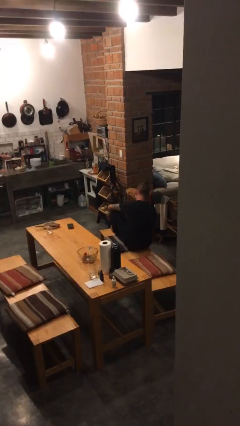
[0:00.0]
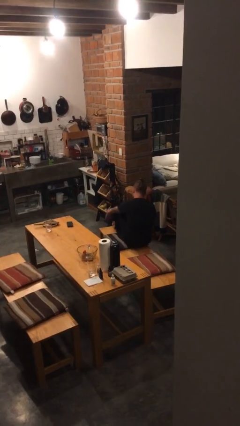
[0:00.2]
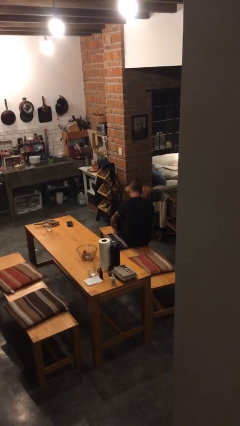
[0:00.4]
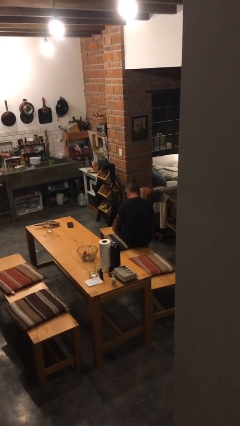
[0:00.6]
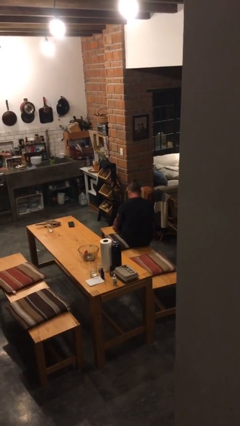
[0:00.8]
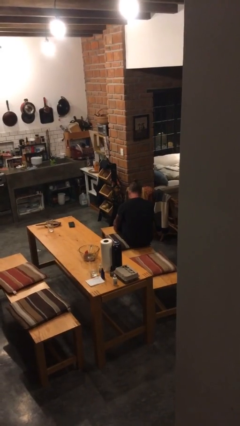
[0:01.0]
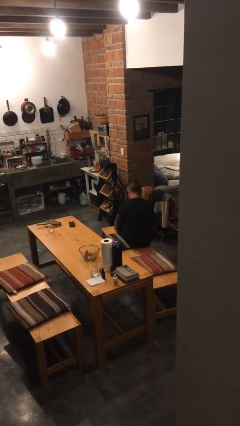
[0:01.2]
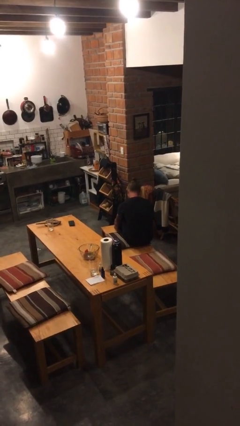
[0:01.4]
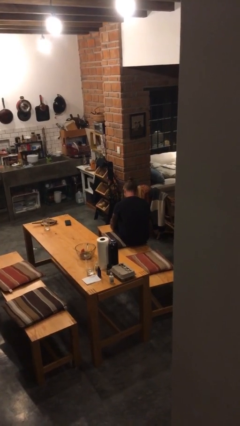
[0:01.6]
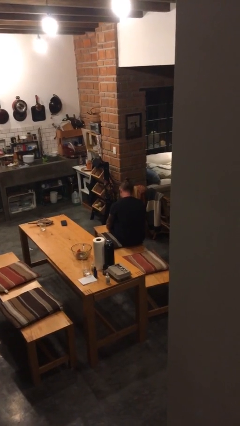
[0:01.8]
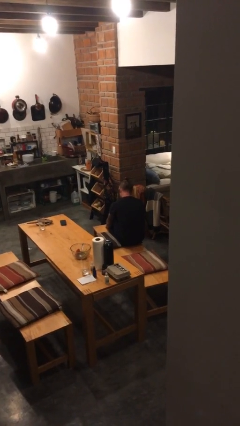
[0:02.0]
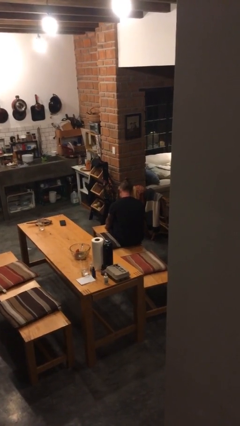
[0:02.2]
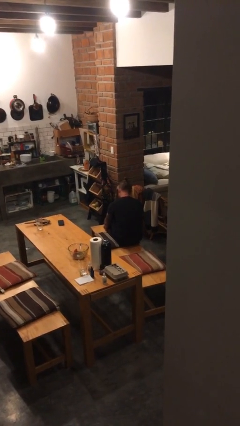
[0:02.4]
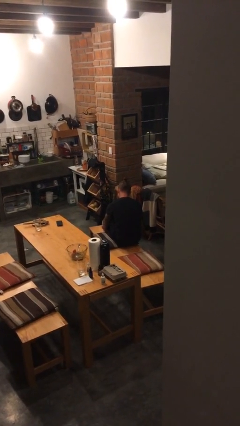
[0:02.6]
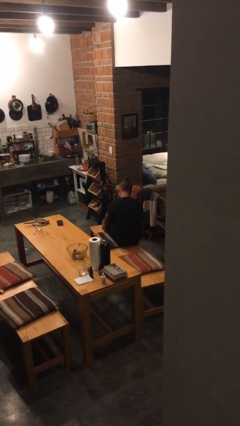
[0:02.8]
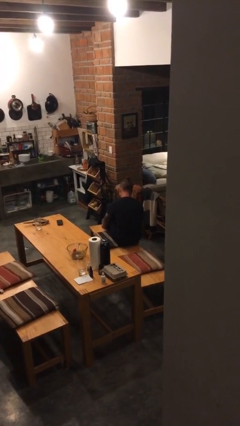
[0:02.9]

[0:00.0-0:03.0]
person rubs foot

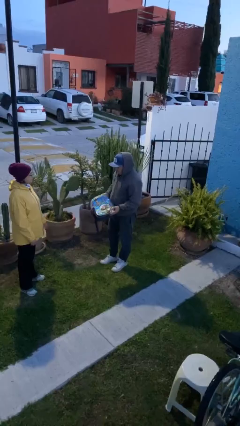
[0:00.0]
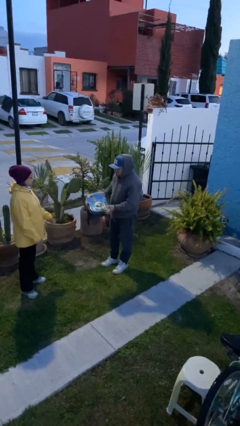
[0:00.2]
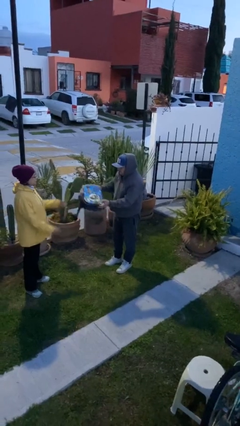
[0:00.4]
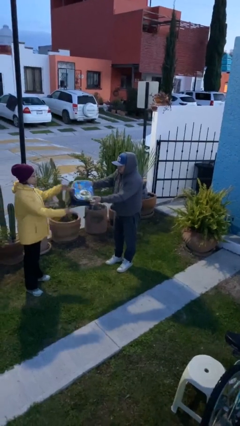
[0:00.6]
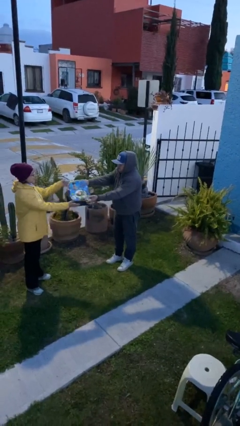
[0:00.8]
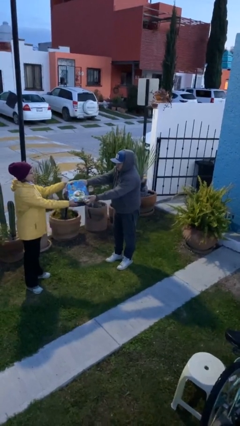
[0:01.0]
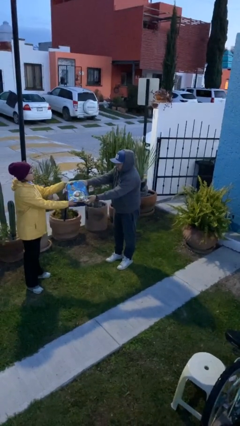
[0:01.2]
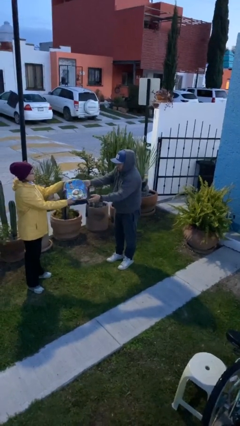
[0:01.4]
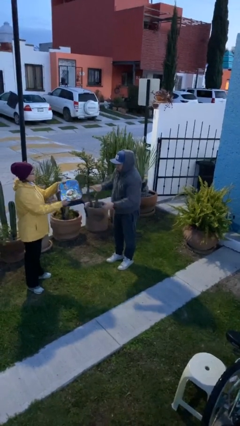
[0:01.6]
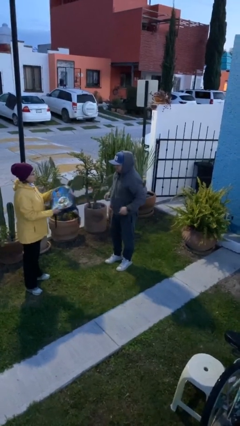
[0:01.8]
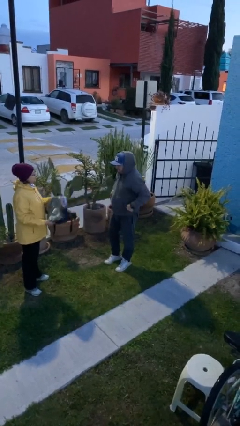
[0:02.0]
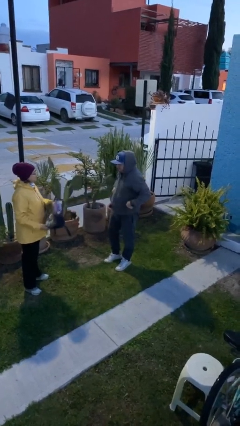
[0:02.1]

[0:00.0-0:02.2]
person transfers object to person

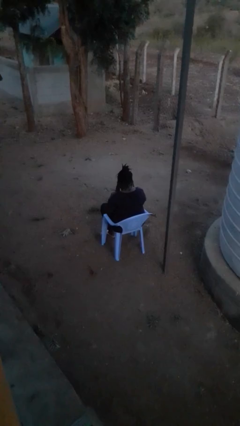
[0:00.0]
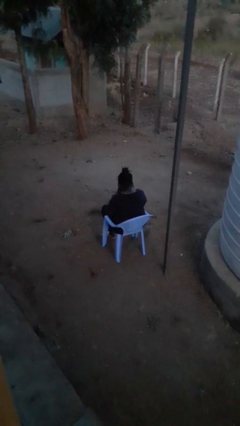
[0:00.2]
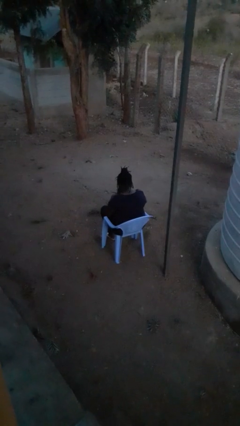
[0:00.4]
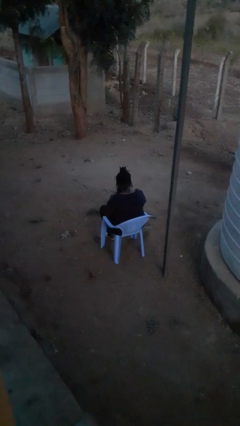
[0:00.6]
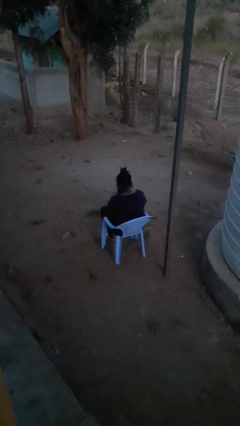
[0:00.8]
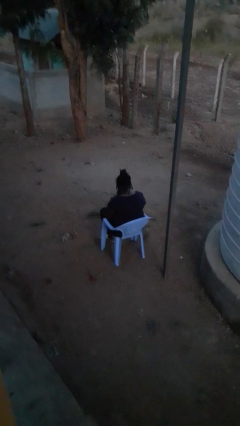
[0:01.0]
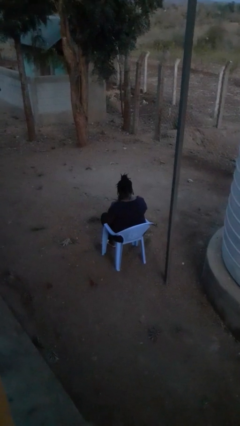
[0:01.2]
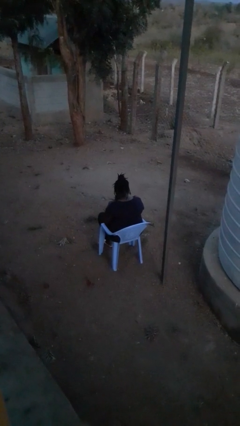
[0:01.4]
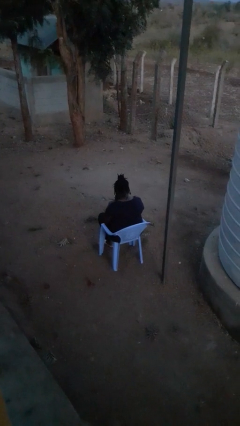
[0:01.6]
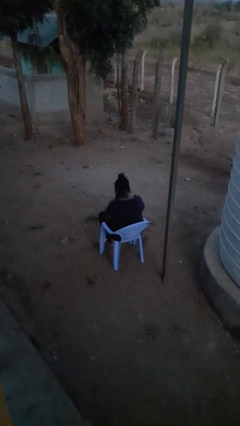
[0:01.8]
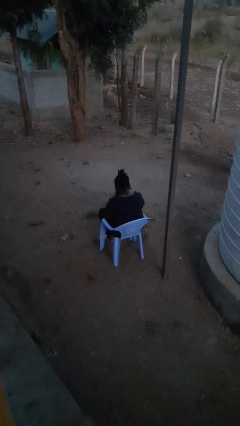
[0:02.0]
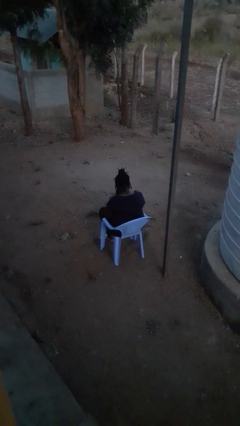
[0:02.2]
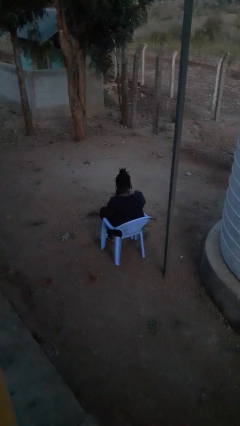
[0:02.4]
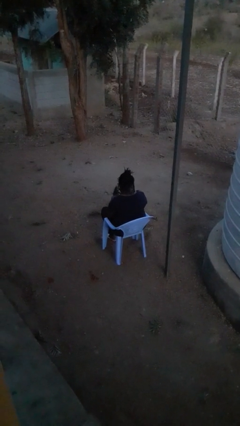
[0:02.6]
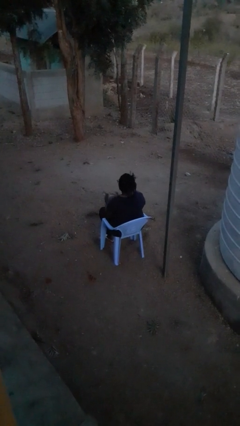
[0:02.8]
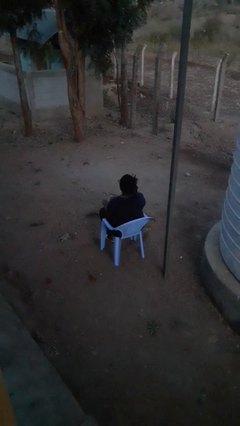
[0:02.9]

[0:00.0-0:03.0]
person prays

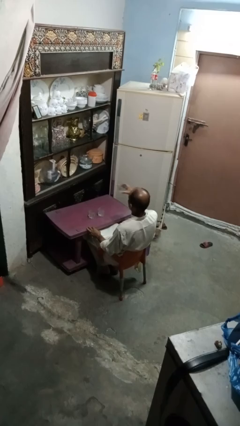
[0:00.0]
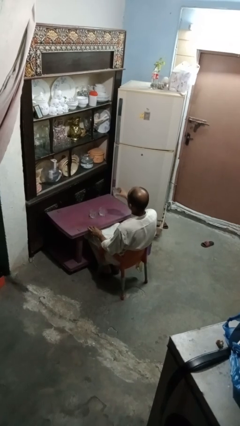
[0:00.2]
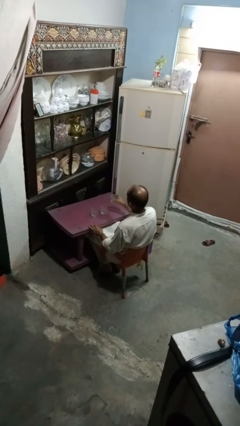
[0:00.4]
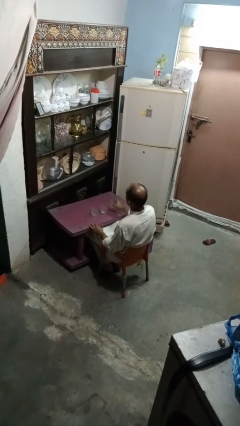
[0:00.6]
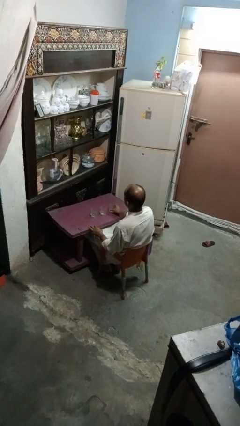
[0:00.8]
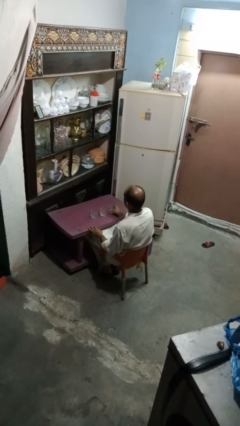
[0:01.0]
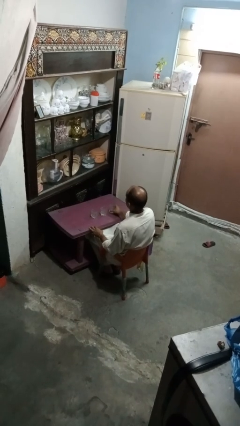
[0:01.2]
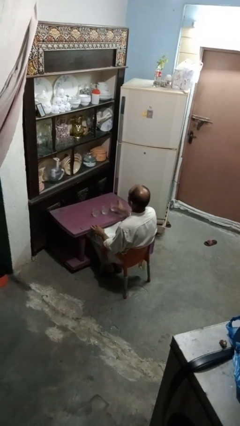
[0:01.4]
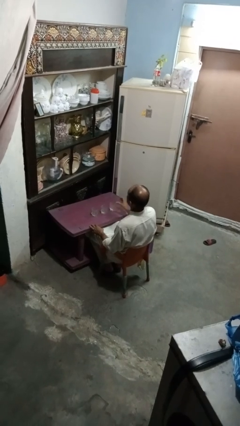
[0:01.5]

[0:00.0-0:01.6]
person puts down object on table

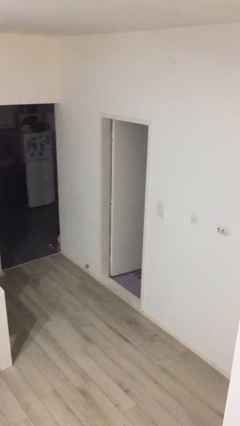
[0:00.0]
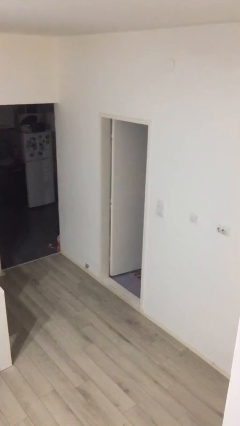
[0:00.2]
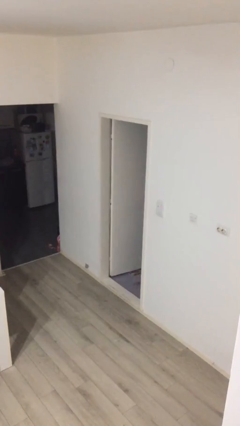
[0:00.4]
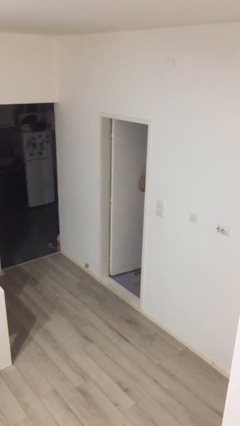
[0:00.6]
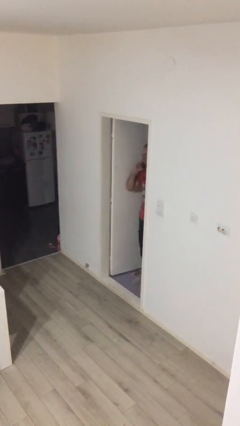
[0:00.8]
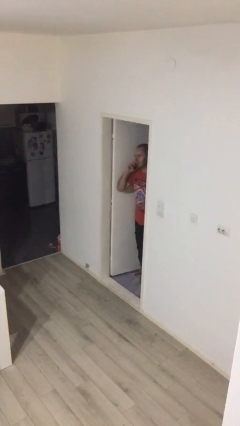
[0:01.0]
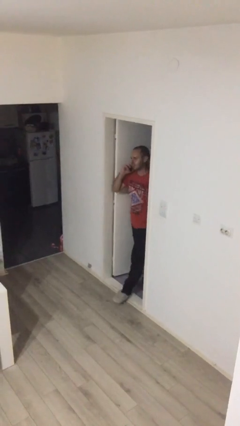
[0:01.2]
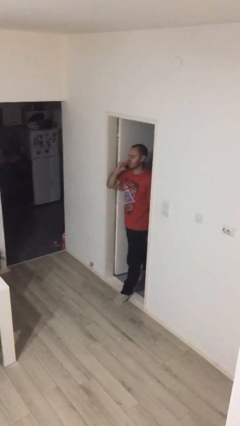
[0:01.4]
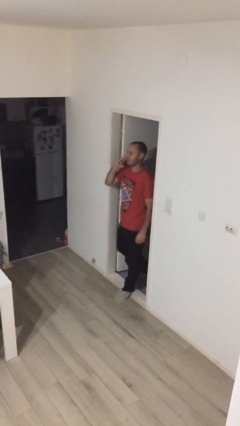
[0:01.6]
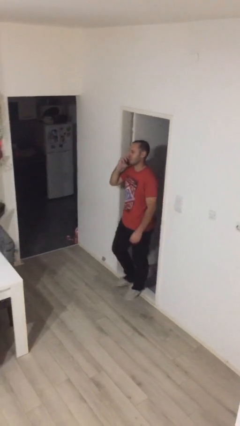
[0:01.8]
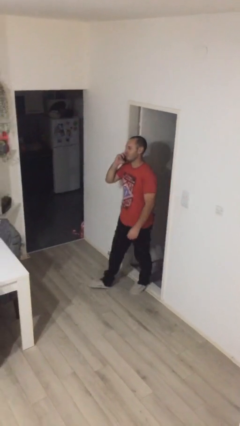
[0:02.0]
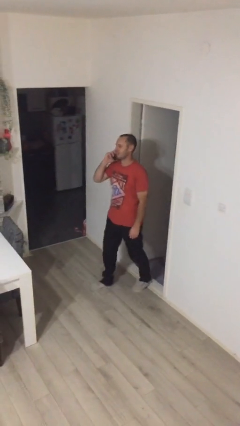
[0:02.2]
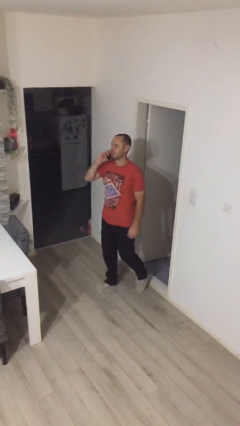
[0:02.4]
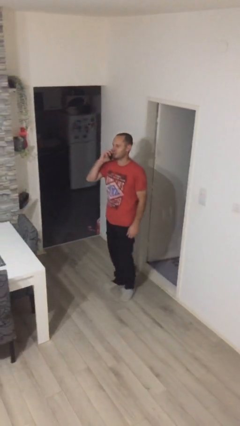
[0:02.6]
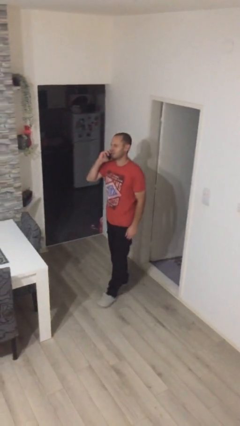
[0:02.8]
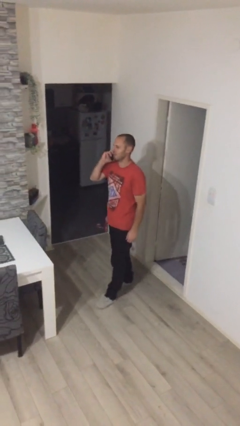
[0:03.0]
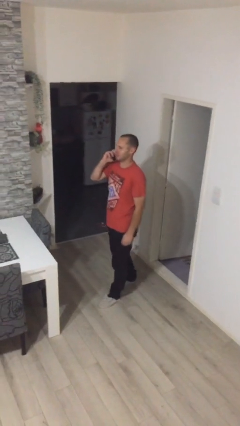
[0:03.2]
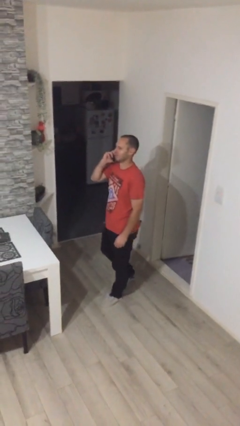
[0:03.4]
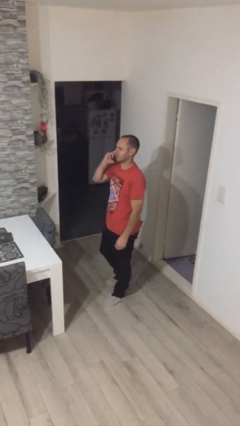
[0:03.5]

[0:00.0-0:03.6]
person enters scene through structure

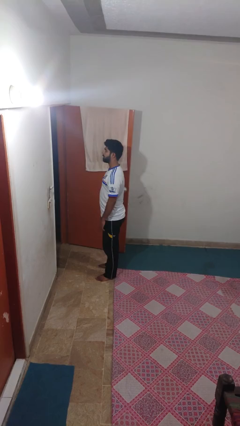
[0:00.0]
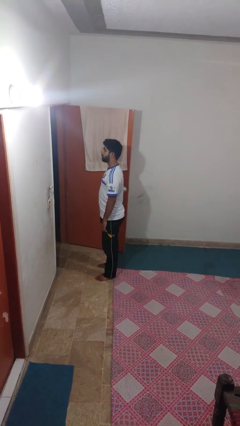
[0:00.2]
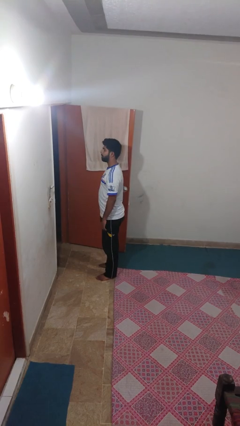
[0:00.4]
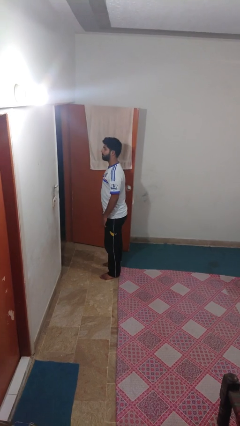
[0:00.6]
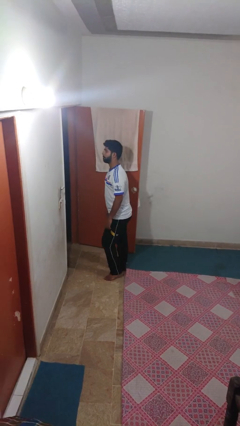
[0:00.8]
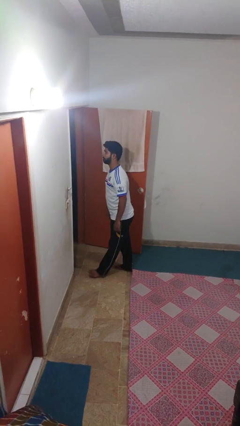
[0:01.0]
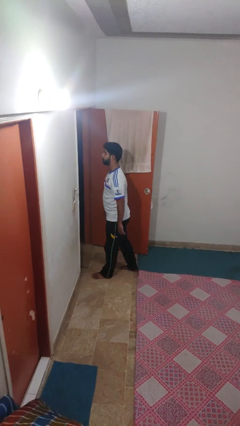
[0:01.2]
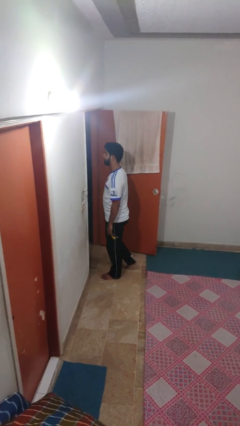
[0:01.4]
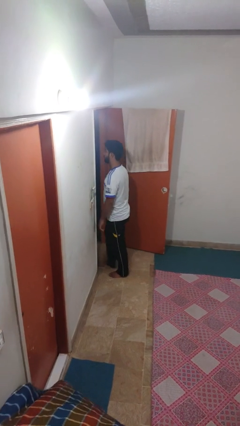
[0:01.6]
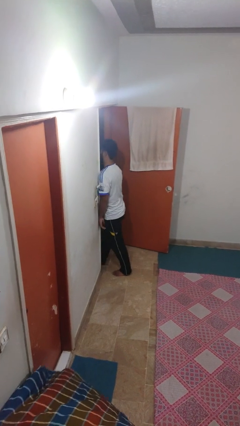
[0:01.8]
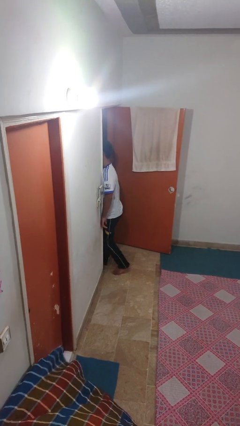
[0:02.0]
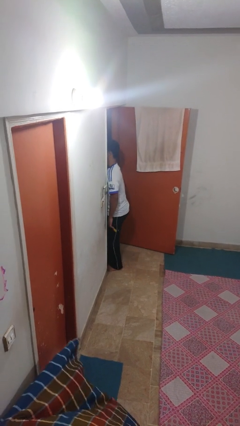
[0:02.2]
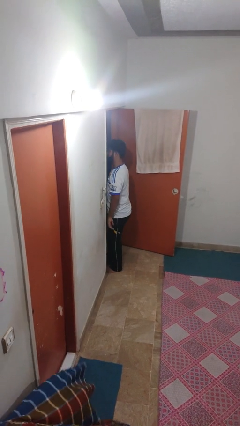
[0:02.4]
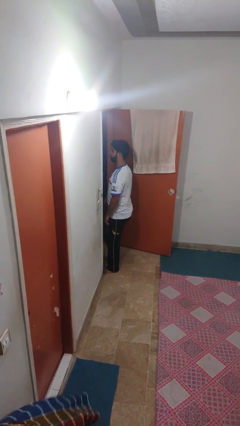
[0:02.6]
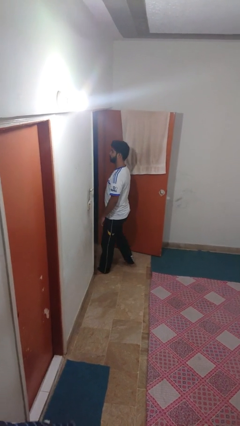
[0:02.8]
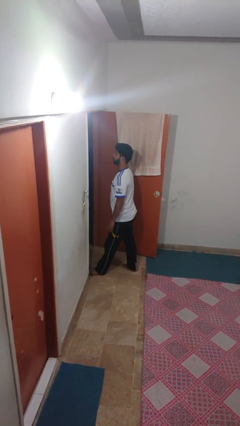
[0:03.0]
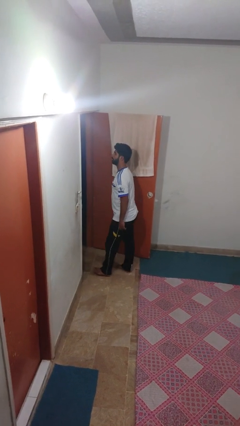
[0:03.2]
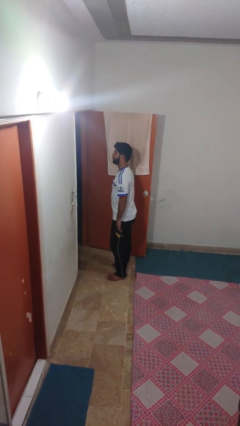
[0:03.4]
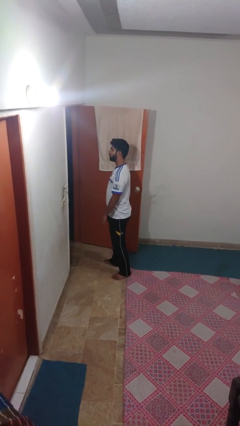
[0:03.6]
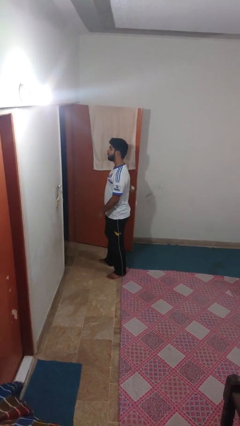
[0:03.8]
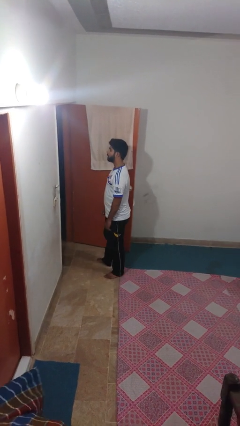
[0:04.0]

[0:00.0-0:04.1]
person bumps into wall
